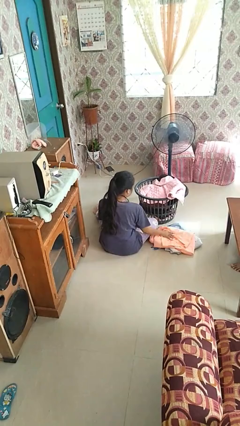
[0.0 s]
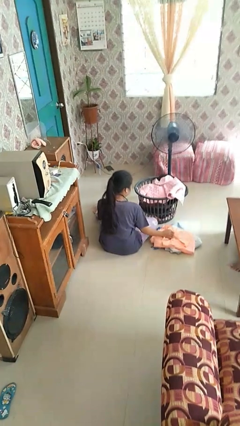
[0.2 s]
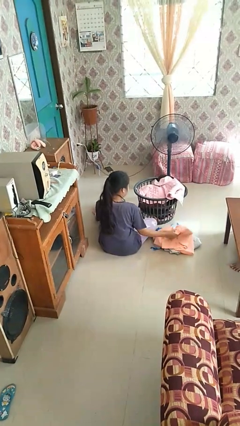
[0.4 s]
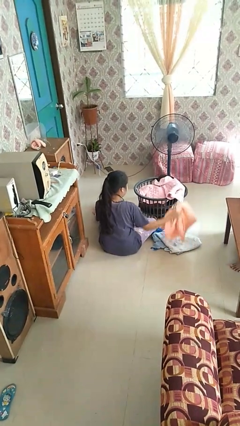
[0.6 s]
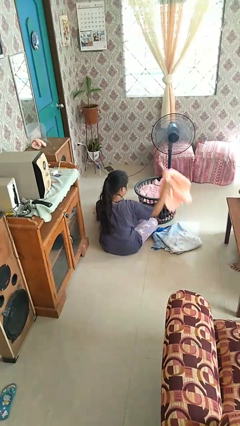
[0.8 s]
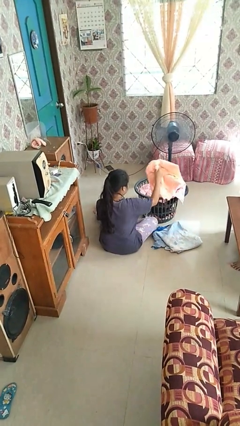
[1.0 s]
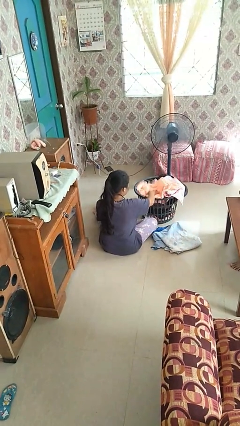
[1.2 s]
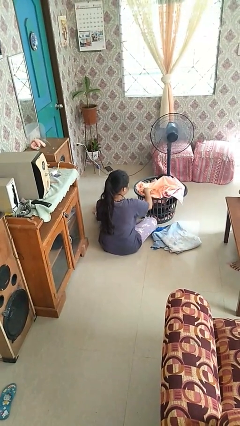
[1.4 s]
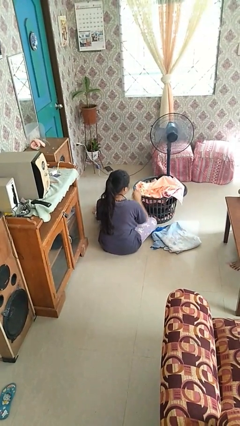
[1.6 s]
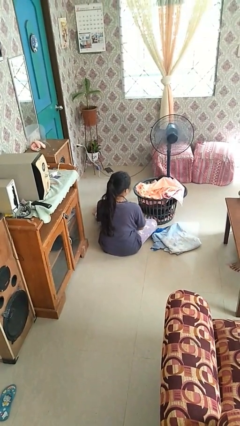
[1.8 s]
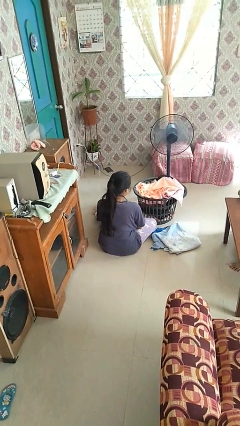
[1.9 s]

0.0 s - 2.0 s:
person puts object into basket

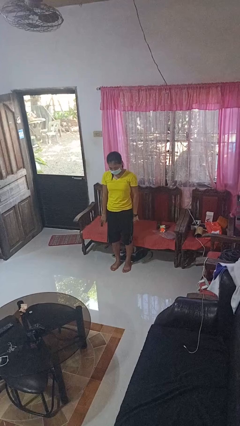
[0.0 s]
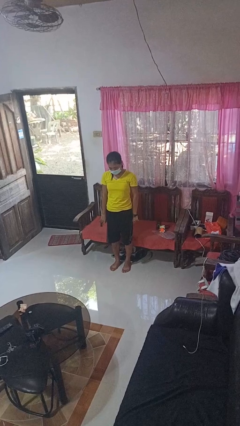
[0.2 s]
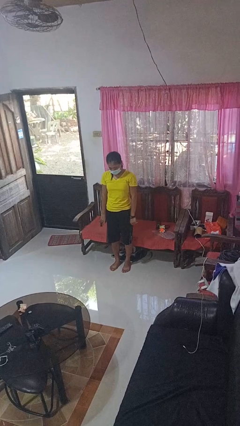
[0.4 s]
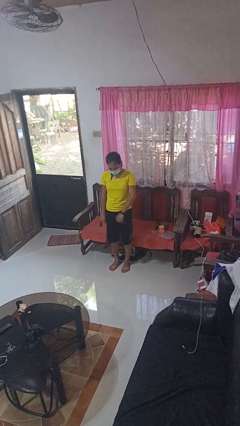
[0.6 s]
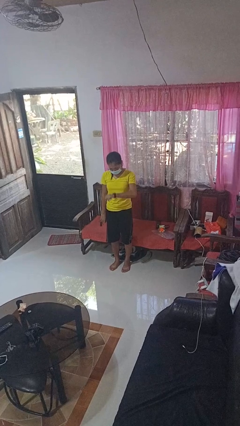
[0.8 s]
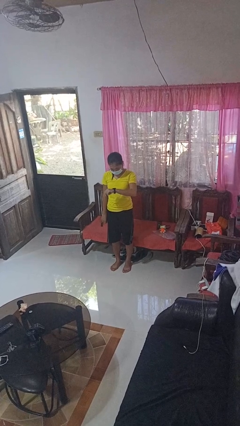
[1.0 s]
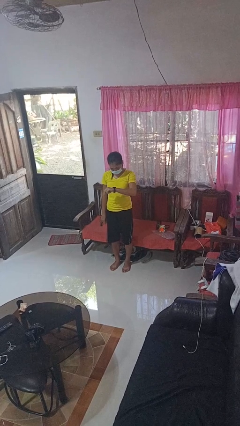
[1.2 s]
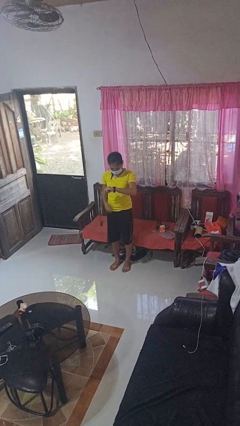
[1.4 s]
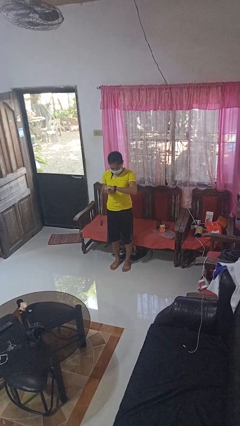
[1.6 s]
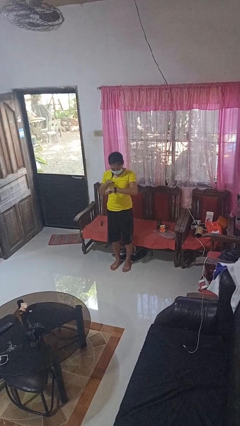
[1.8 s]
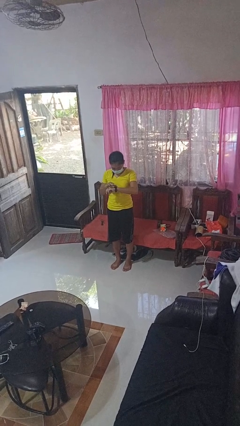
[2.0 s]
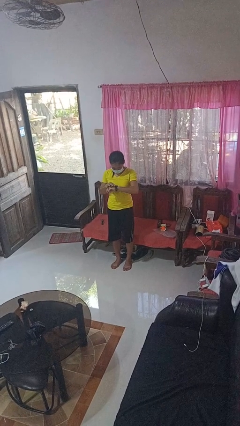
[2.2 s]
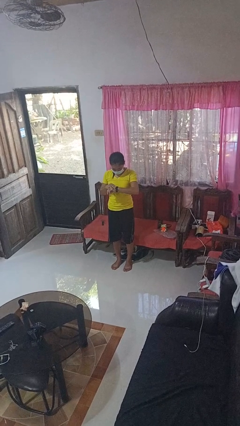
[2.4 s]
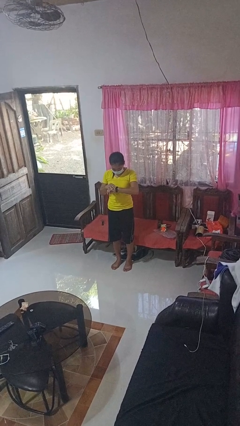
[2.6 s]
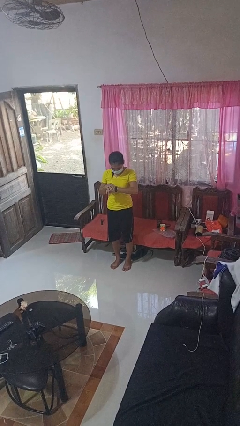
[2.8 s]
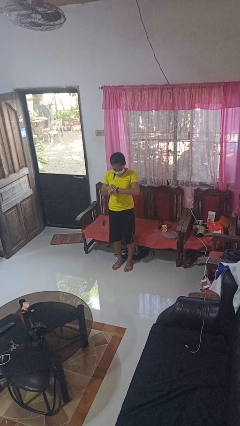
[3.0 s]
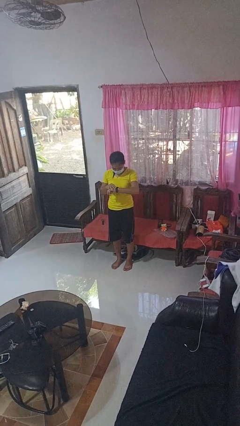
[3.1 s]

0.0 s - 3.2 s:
person looks at wristwatch

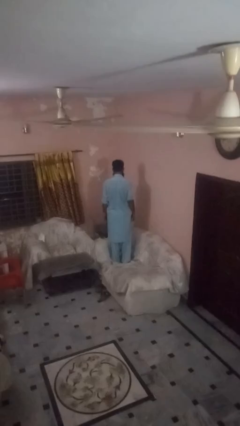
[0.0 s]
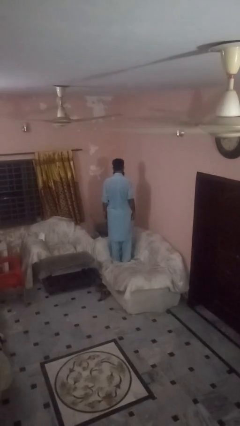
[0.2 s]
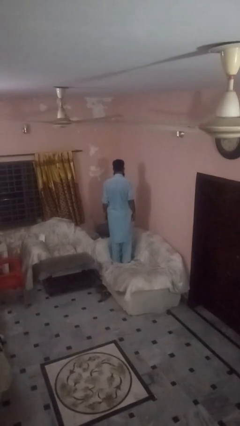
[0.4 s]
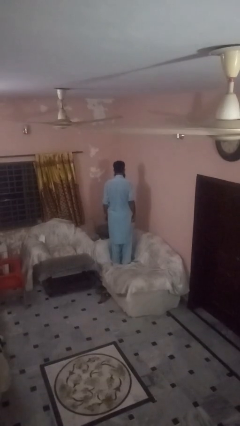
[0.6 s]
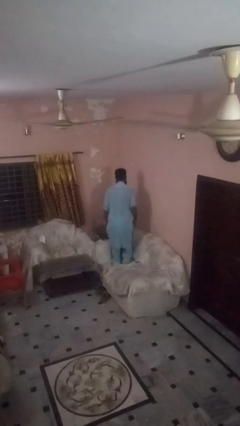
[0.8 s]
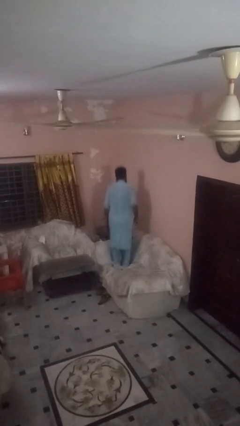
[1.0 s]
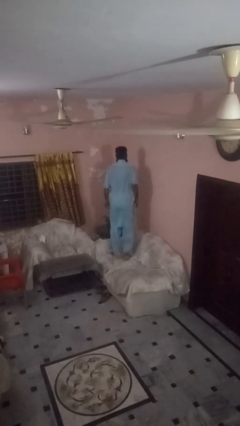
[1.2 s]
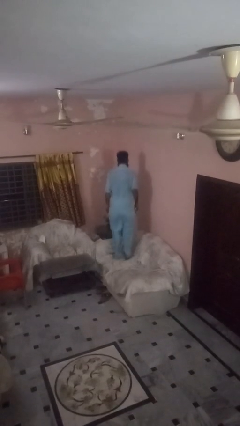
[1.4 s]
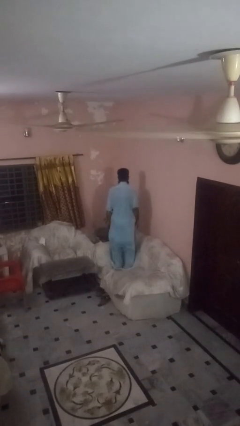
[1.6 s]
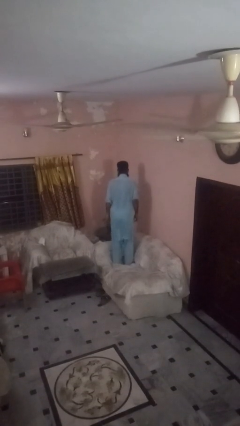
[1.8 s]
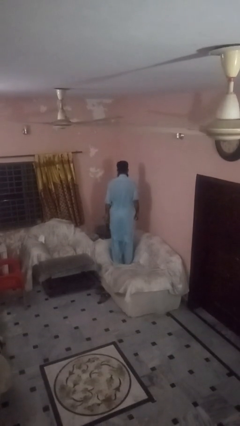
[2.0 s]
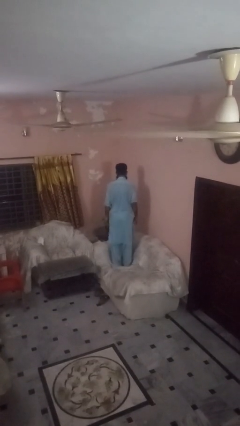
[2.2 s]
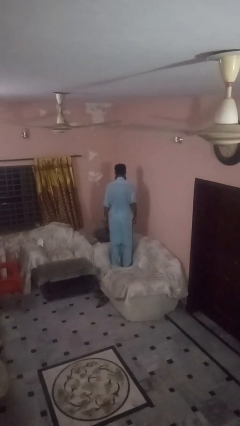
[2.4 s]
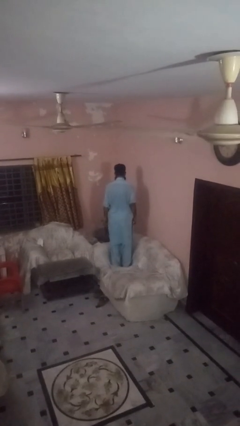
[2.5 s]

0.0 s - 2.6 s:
person jumps on couch

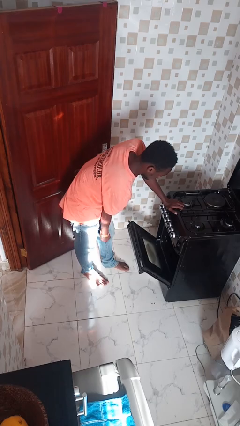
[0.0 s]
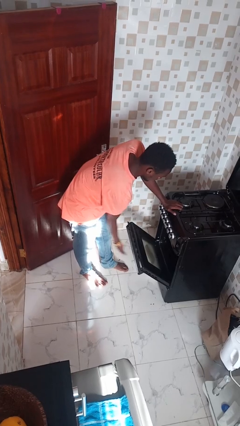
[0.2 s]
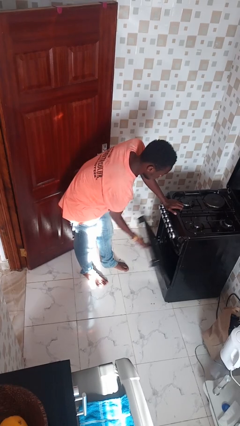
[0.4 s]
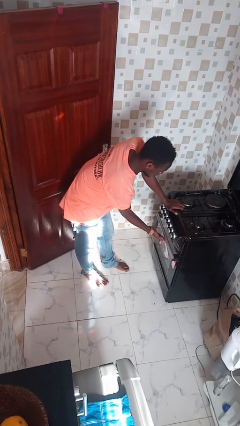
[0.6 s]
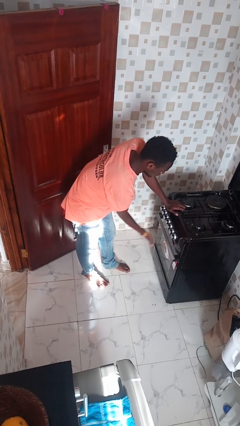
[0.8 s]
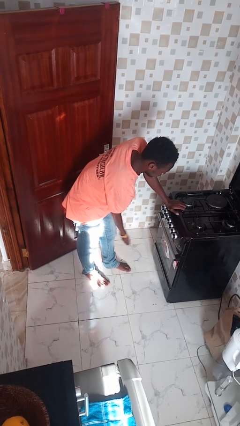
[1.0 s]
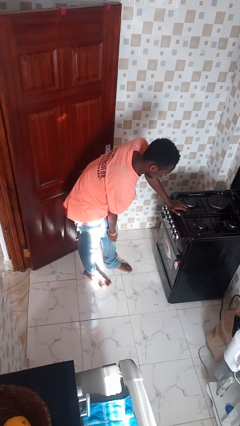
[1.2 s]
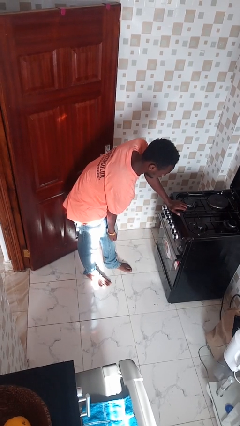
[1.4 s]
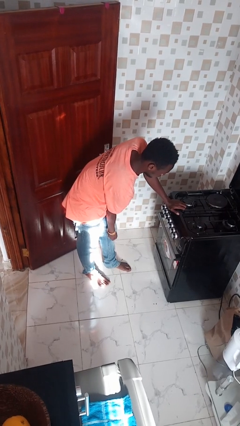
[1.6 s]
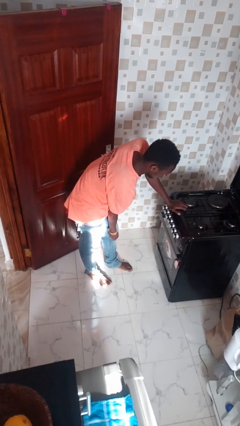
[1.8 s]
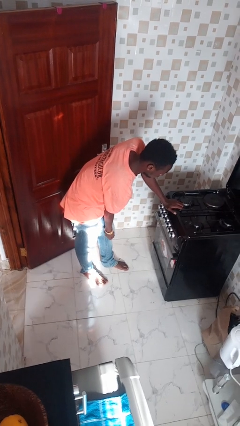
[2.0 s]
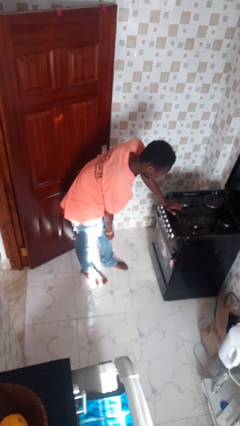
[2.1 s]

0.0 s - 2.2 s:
person closes oven door

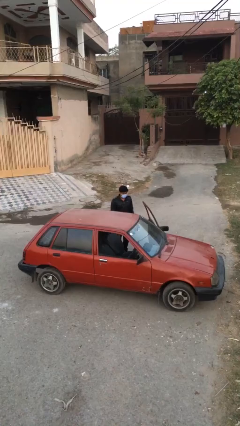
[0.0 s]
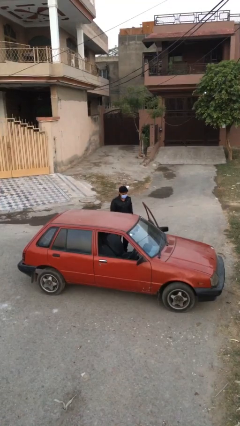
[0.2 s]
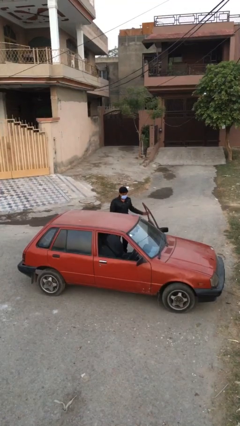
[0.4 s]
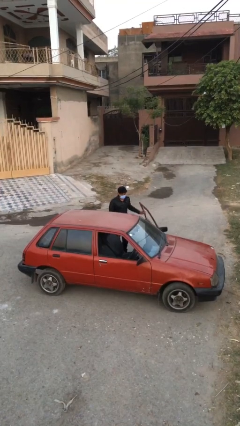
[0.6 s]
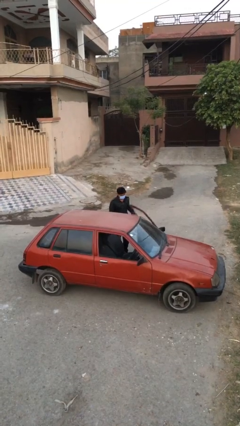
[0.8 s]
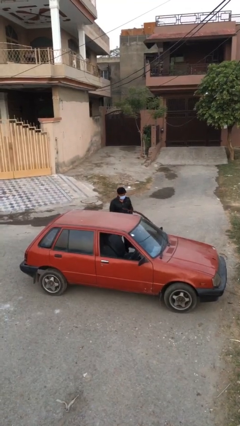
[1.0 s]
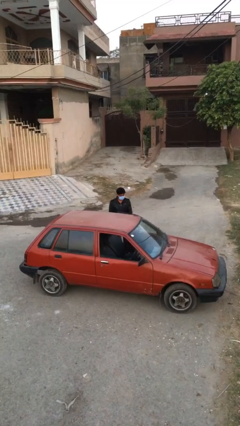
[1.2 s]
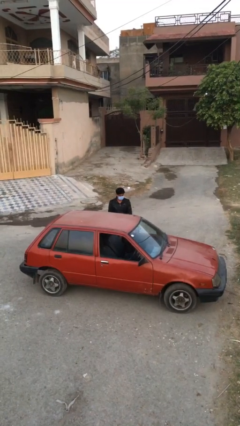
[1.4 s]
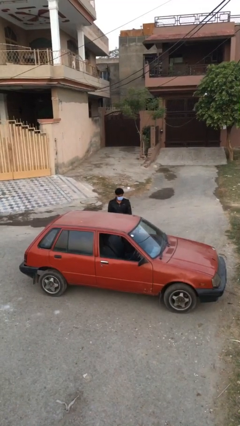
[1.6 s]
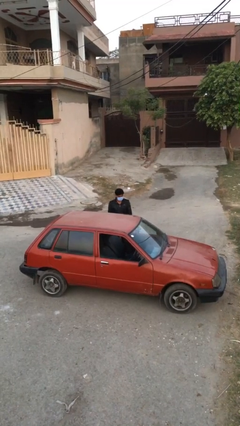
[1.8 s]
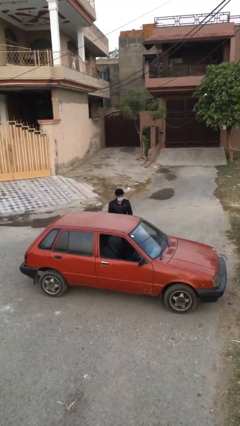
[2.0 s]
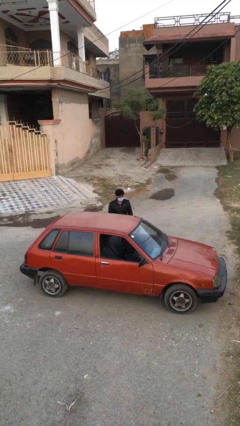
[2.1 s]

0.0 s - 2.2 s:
person closes car door

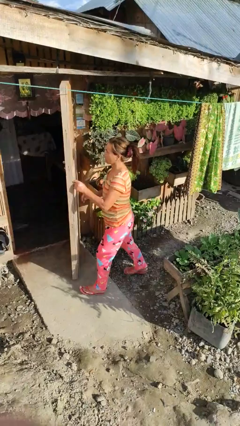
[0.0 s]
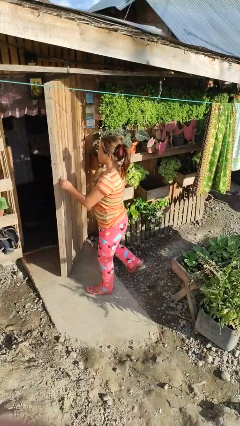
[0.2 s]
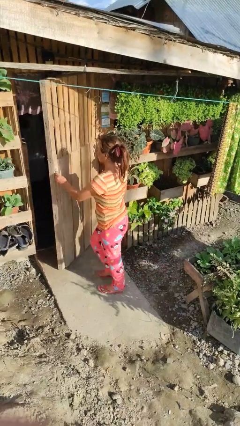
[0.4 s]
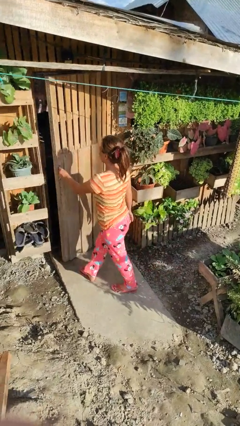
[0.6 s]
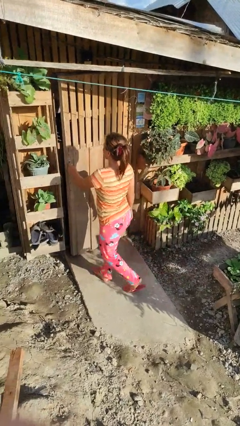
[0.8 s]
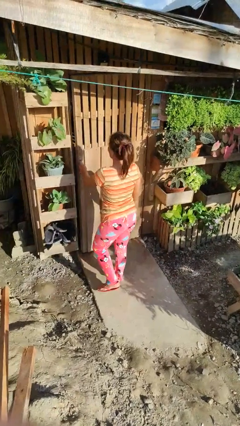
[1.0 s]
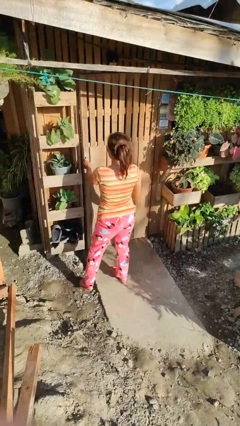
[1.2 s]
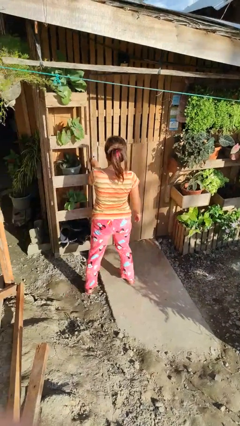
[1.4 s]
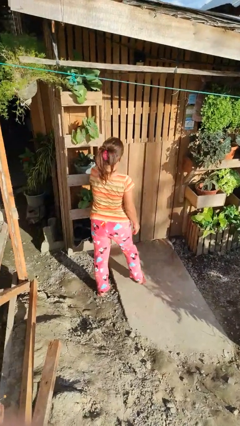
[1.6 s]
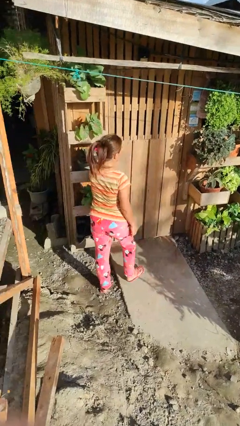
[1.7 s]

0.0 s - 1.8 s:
person closes facility door

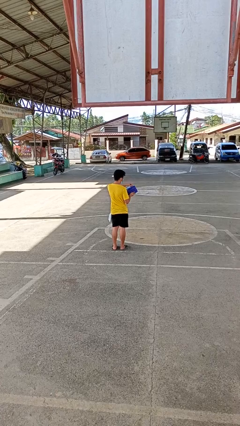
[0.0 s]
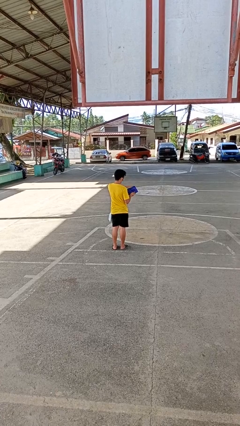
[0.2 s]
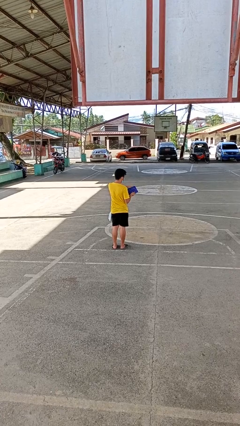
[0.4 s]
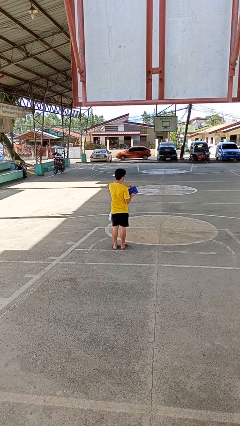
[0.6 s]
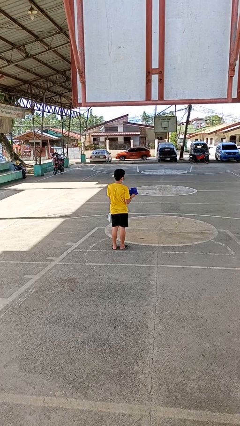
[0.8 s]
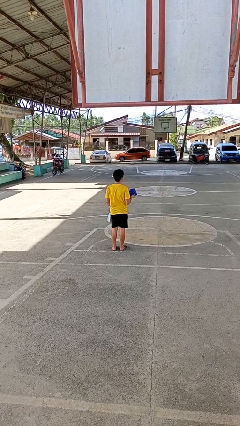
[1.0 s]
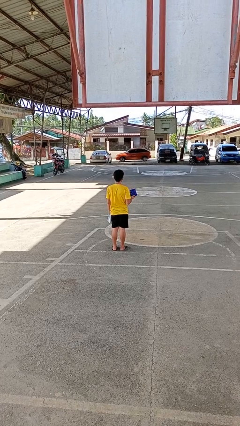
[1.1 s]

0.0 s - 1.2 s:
person puts object into purse

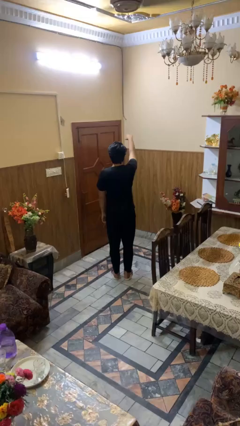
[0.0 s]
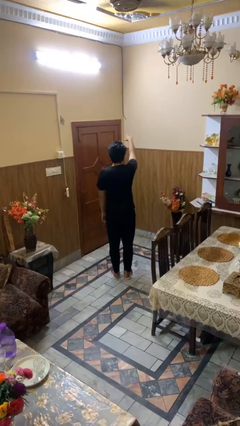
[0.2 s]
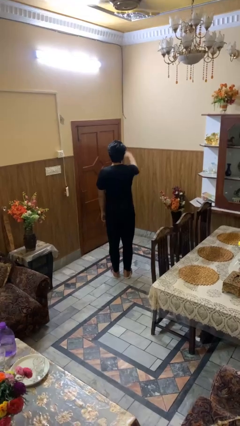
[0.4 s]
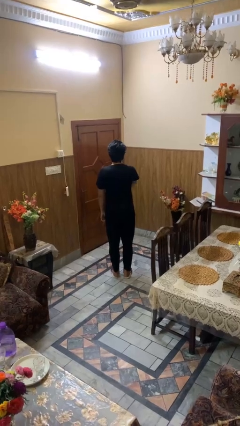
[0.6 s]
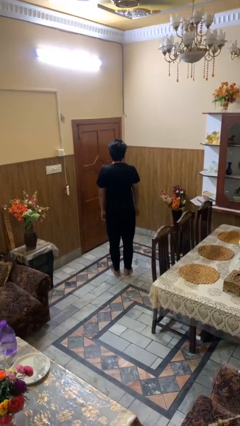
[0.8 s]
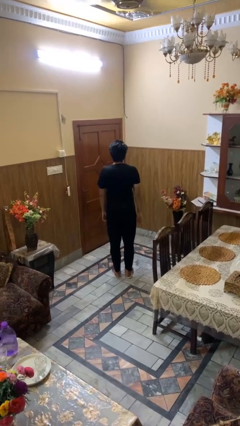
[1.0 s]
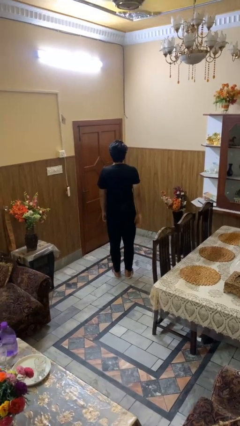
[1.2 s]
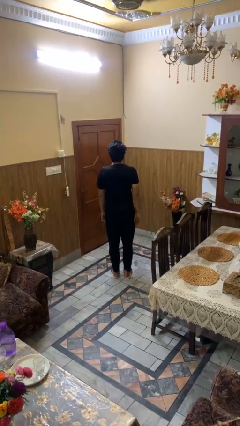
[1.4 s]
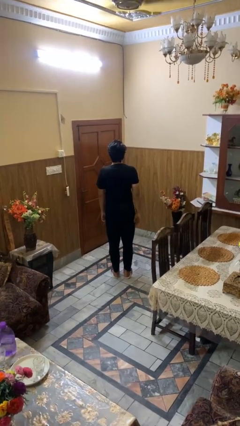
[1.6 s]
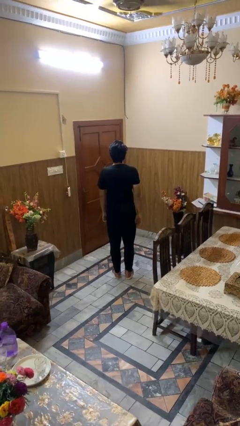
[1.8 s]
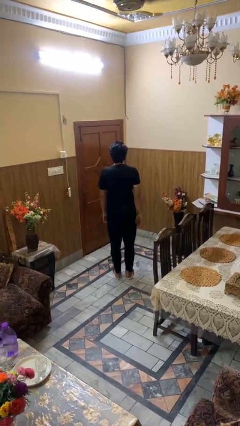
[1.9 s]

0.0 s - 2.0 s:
person gestures swipe down
